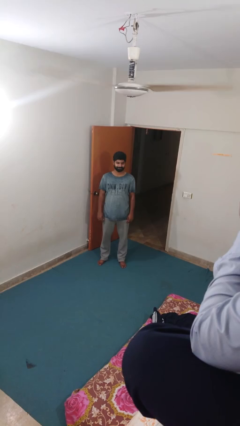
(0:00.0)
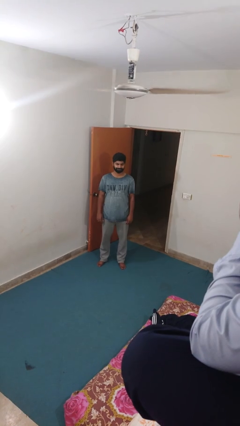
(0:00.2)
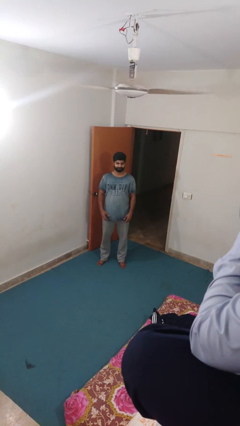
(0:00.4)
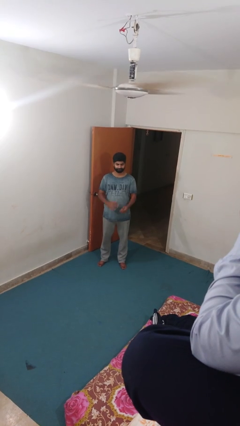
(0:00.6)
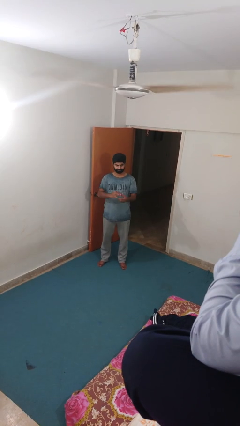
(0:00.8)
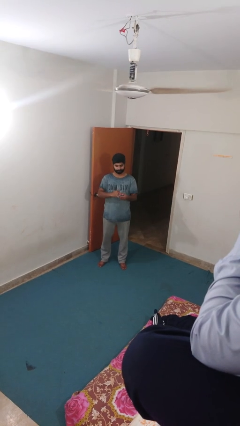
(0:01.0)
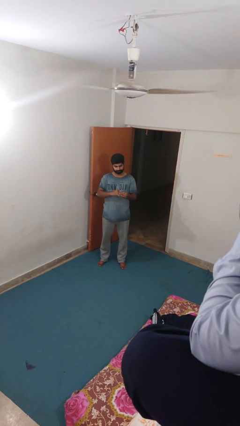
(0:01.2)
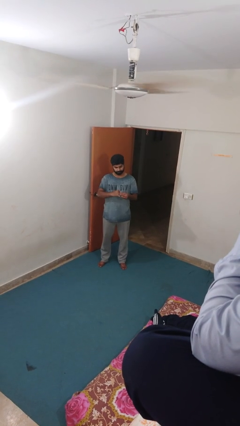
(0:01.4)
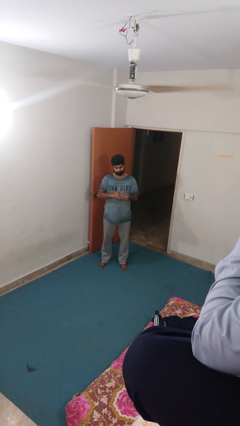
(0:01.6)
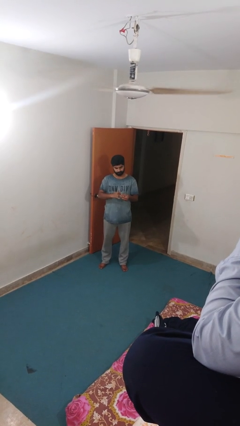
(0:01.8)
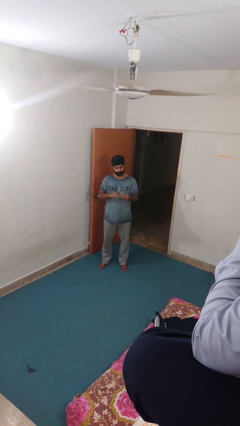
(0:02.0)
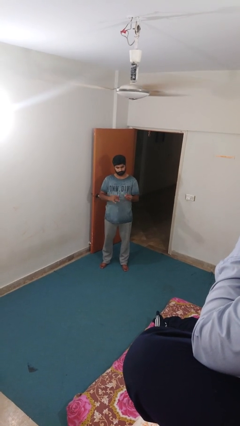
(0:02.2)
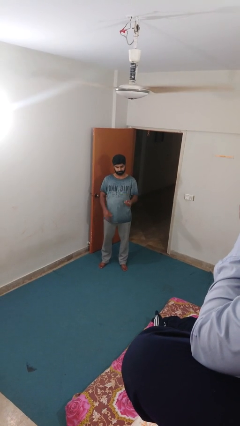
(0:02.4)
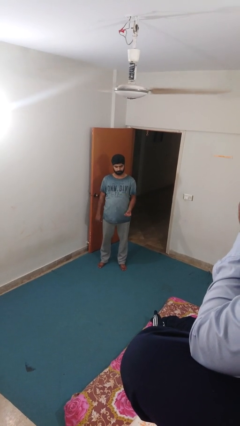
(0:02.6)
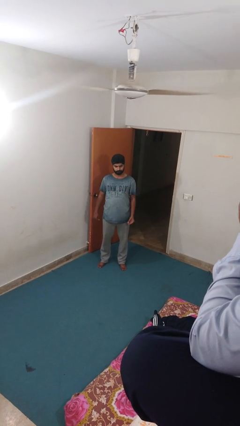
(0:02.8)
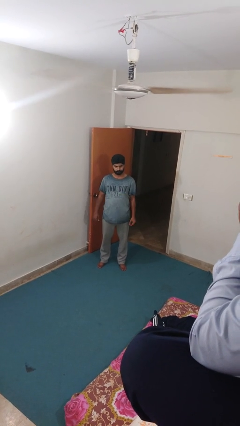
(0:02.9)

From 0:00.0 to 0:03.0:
person takes off ring

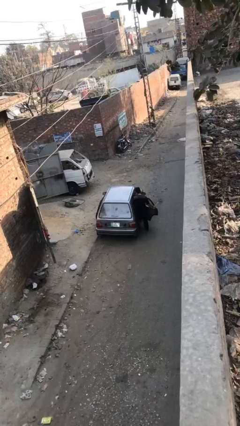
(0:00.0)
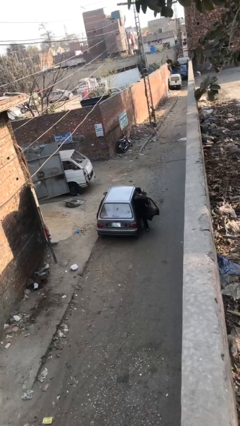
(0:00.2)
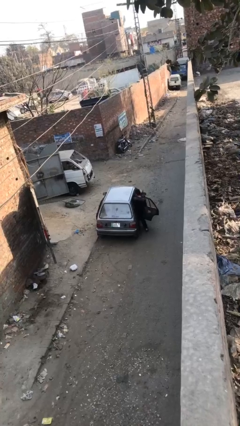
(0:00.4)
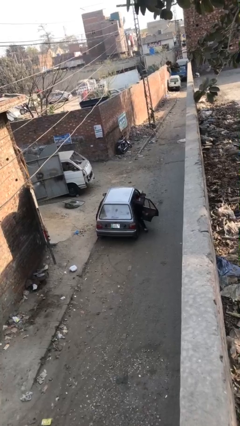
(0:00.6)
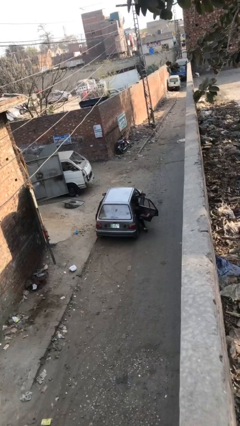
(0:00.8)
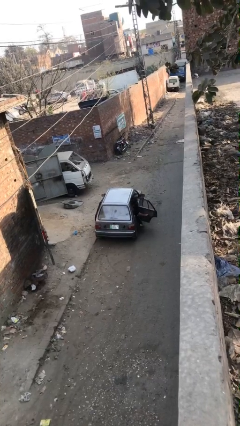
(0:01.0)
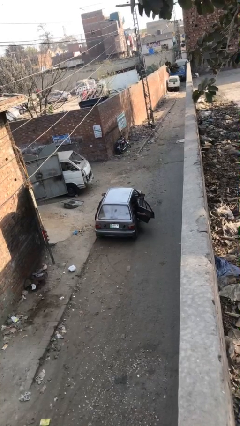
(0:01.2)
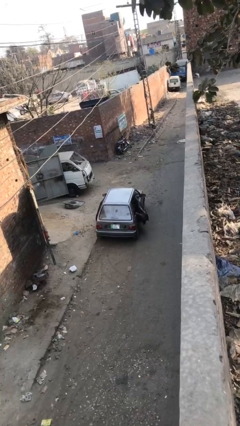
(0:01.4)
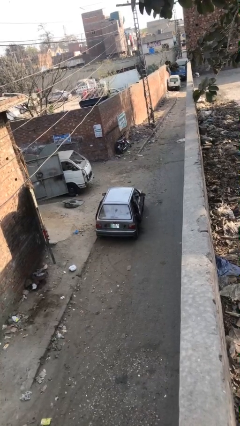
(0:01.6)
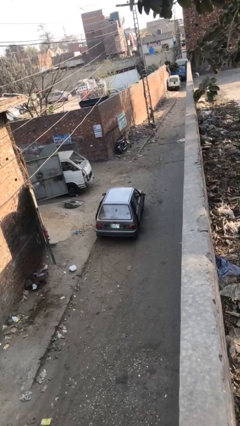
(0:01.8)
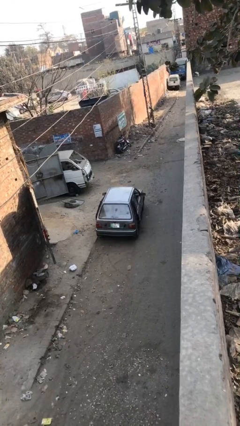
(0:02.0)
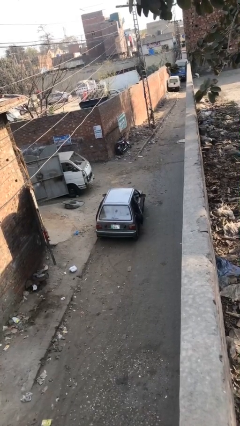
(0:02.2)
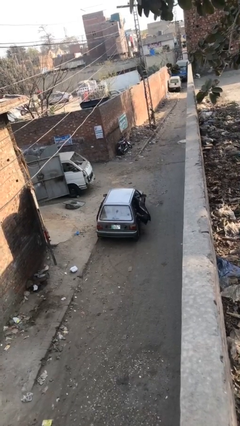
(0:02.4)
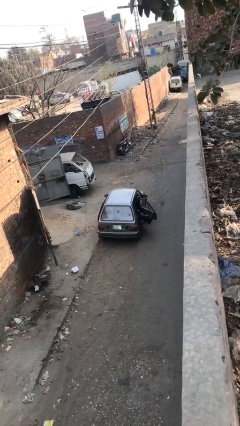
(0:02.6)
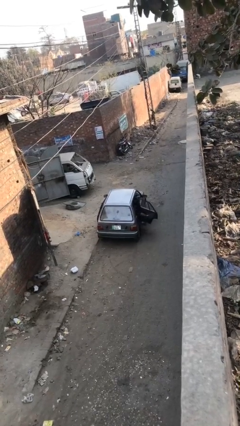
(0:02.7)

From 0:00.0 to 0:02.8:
car picks up person

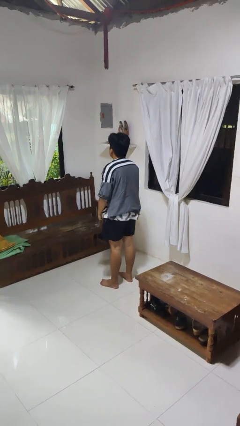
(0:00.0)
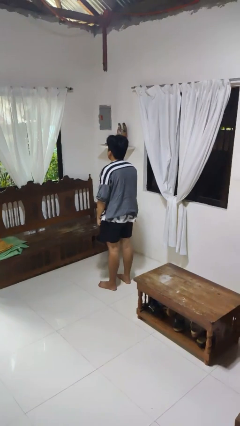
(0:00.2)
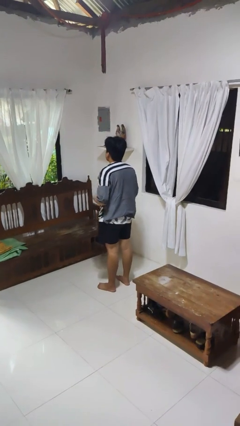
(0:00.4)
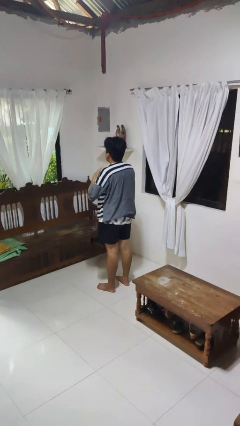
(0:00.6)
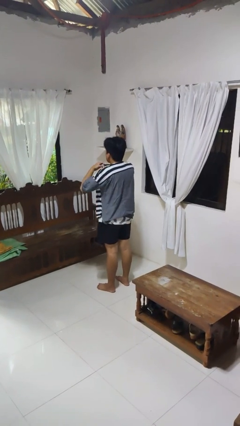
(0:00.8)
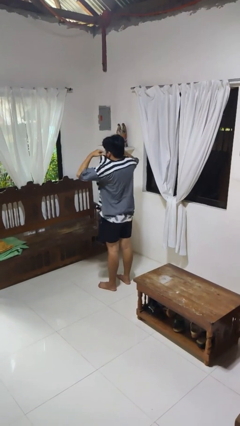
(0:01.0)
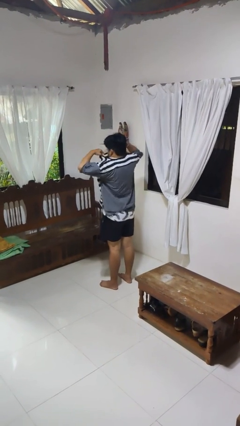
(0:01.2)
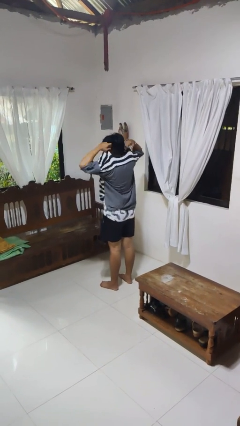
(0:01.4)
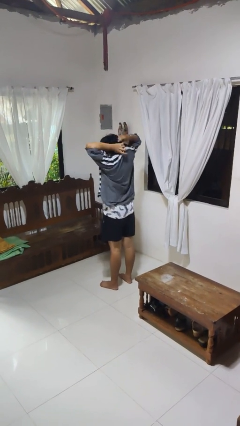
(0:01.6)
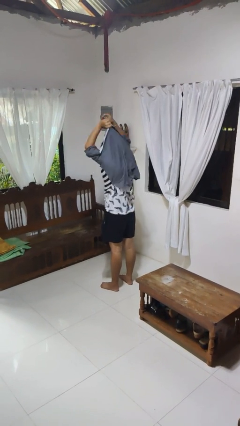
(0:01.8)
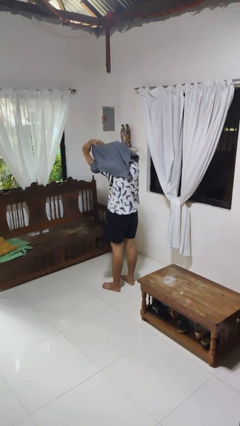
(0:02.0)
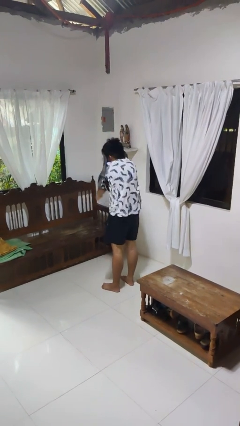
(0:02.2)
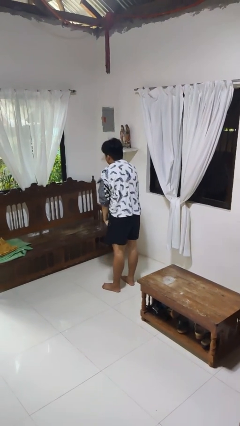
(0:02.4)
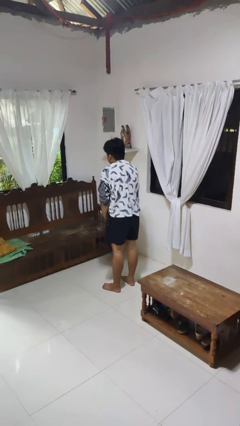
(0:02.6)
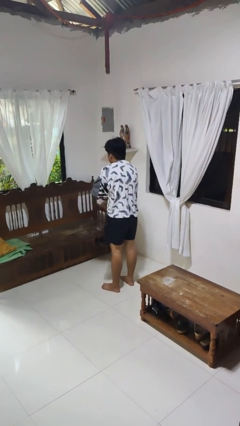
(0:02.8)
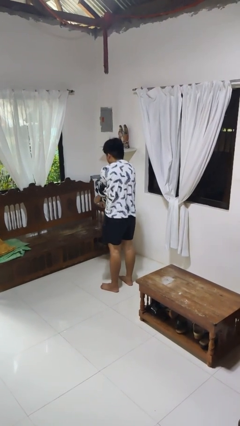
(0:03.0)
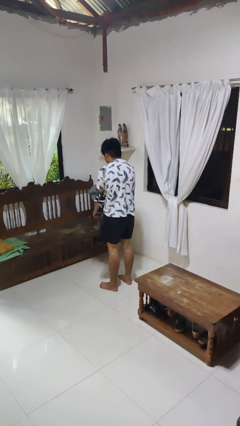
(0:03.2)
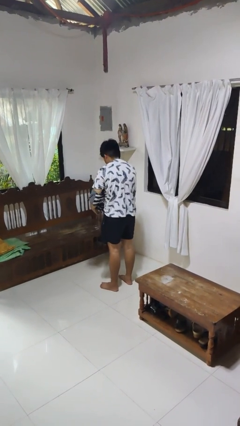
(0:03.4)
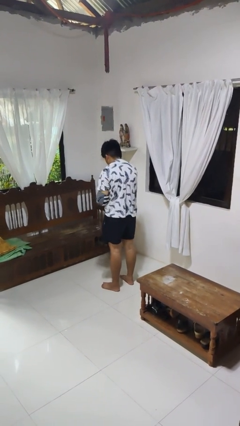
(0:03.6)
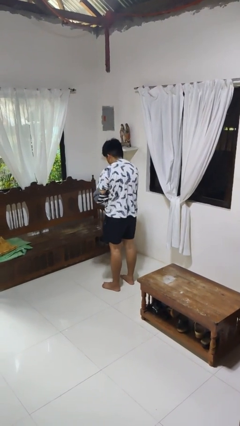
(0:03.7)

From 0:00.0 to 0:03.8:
person takes off shirt

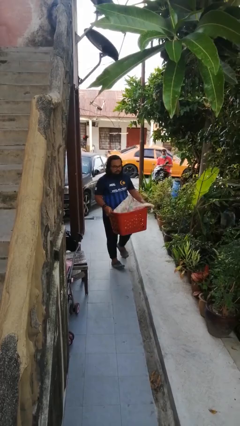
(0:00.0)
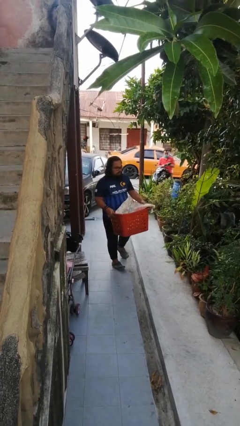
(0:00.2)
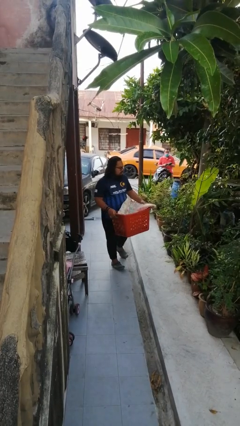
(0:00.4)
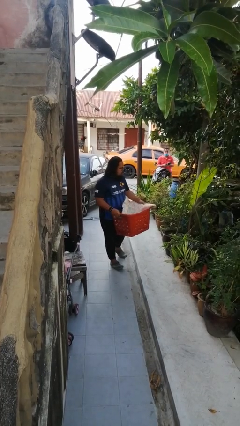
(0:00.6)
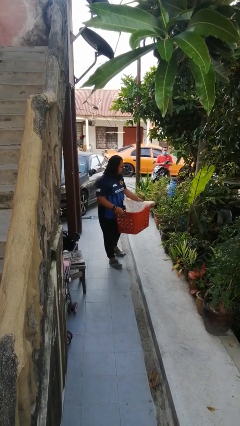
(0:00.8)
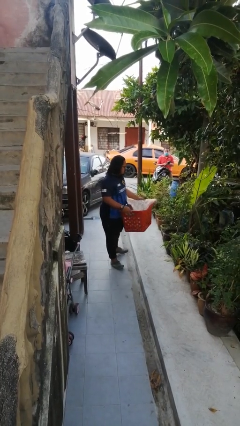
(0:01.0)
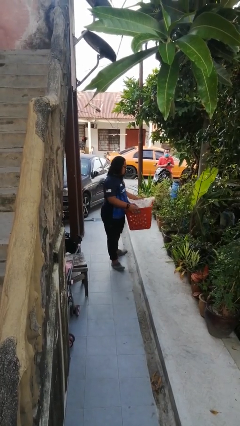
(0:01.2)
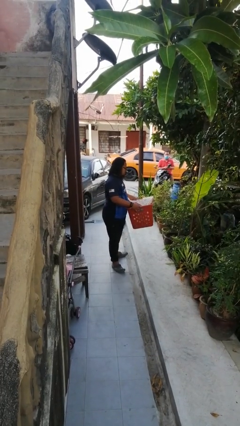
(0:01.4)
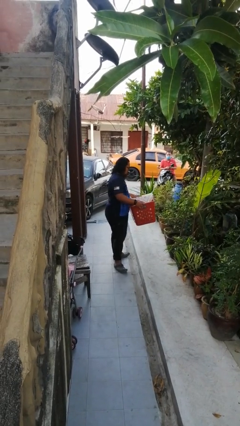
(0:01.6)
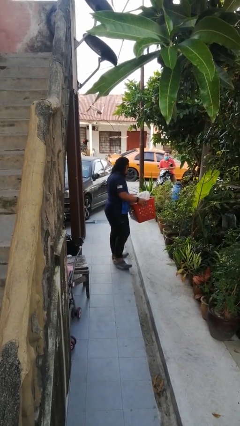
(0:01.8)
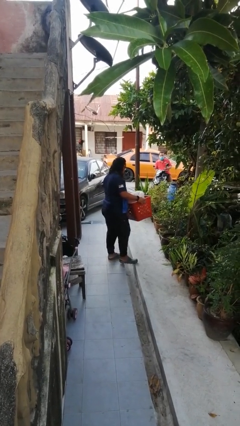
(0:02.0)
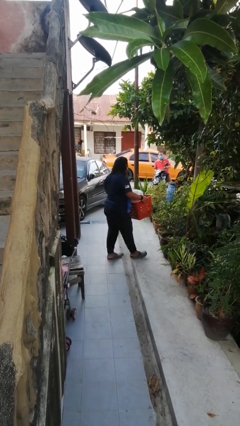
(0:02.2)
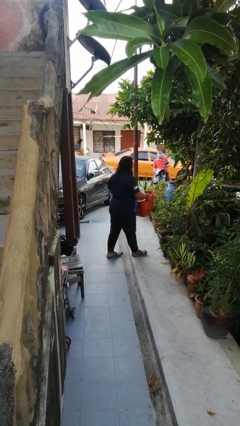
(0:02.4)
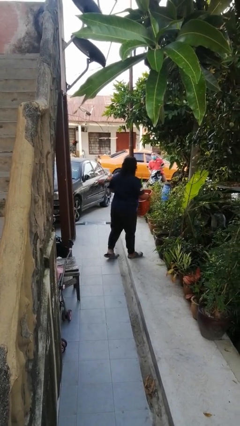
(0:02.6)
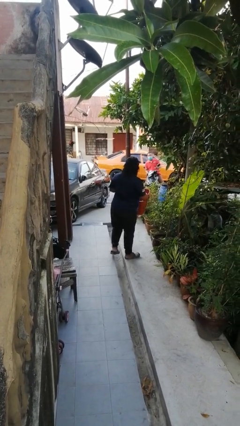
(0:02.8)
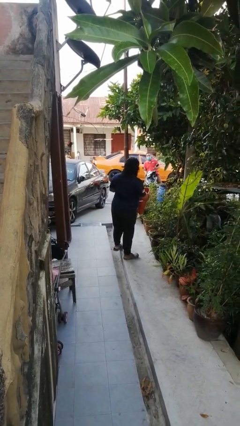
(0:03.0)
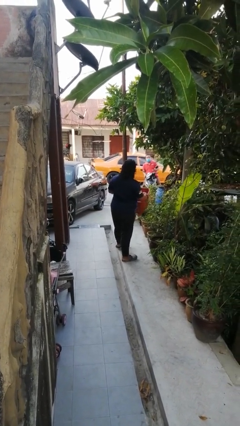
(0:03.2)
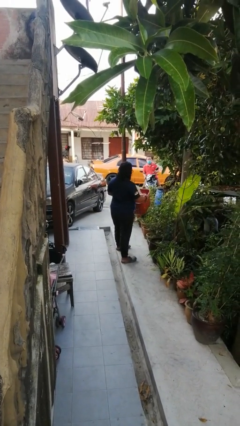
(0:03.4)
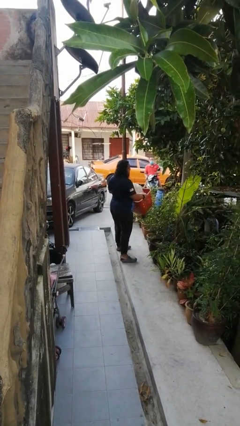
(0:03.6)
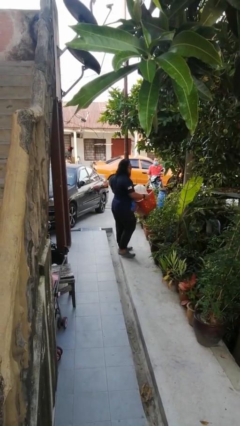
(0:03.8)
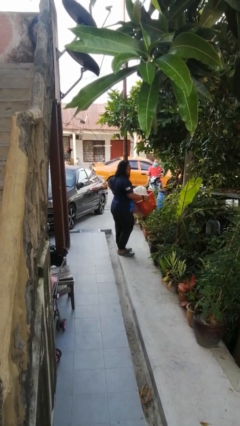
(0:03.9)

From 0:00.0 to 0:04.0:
person carries laundry basket

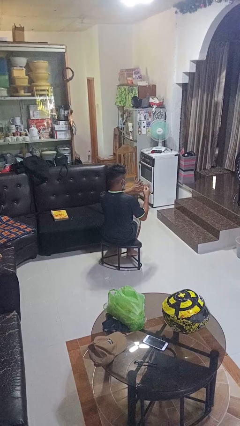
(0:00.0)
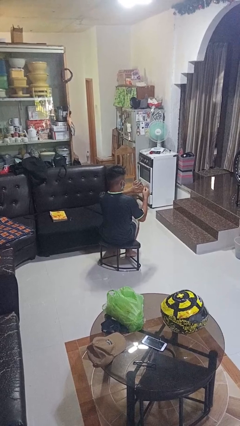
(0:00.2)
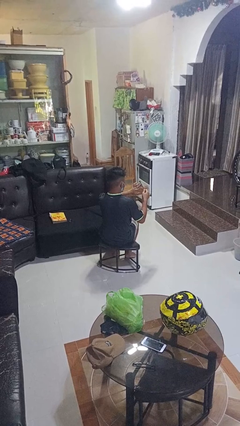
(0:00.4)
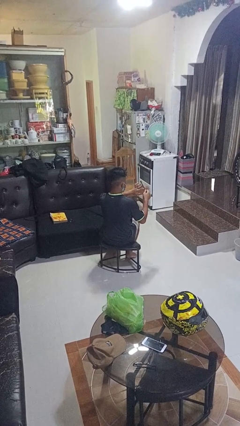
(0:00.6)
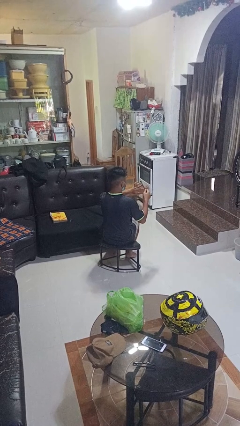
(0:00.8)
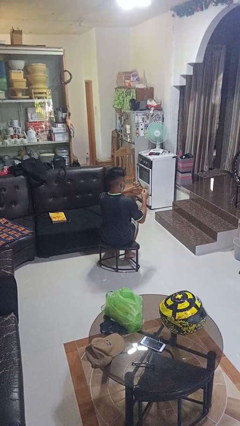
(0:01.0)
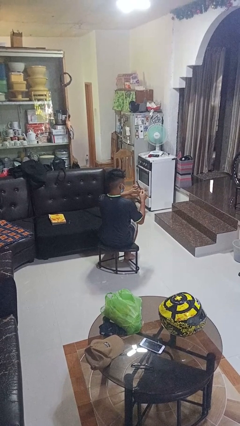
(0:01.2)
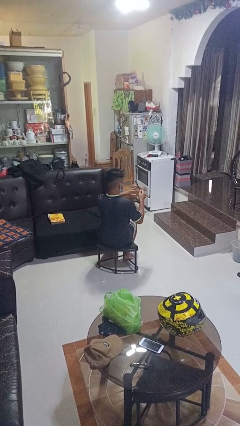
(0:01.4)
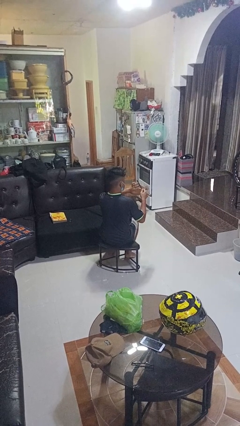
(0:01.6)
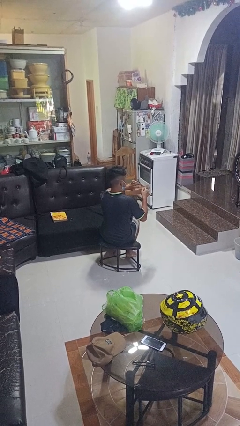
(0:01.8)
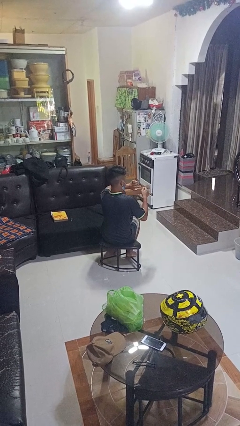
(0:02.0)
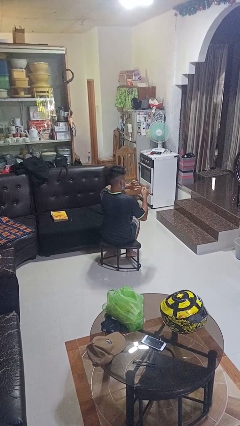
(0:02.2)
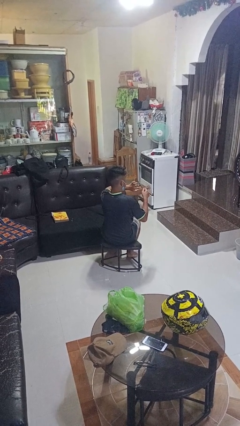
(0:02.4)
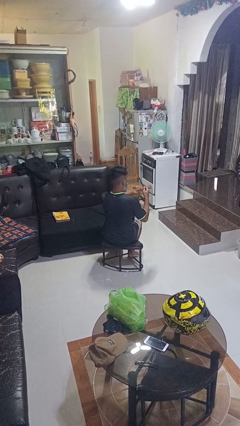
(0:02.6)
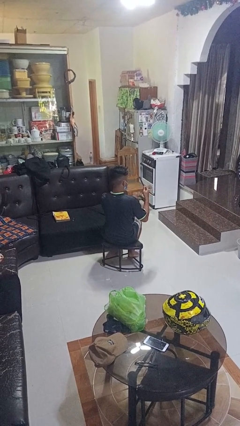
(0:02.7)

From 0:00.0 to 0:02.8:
person files fingernails

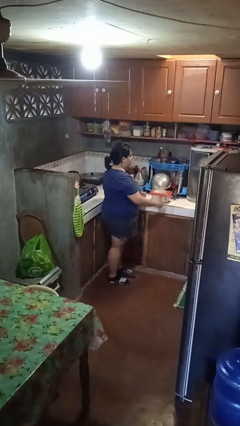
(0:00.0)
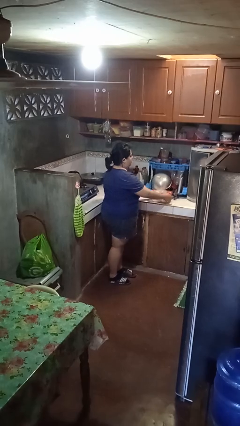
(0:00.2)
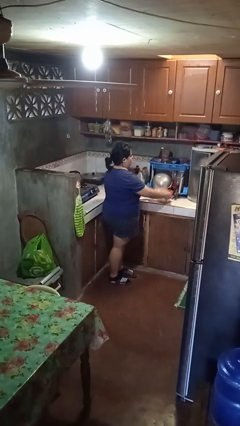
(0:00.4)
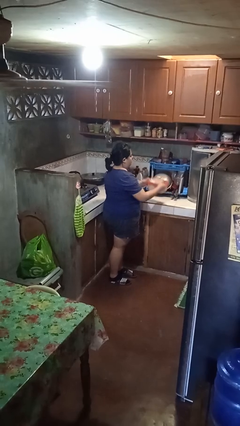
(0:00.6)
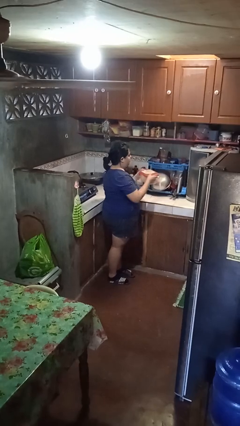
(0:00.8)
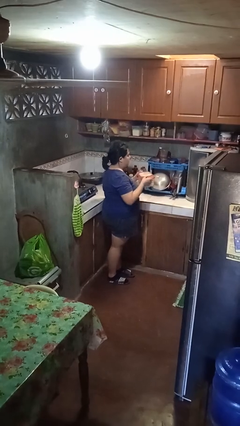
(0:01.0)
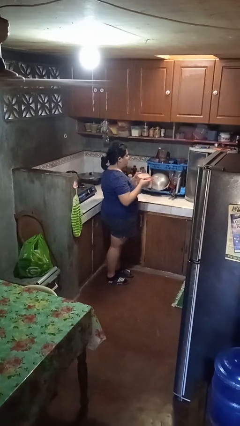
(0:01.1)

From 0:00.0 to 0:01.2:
person picks up object from countertop
